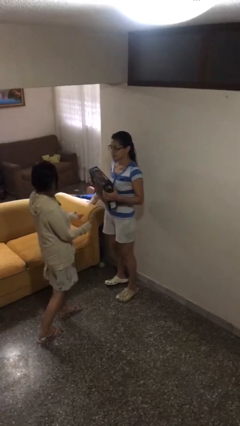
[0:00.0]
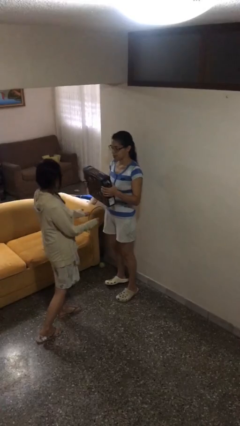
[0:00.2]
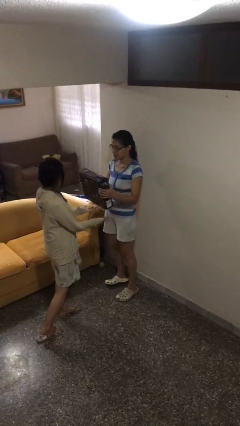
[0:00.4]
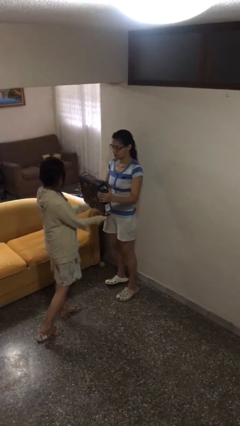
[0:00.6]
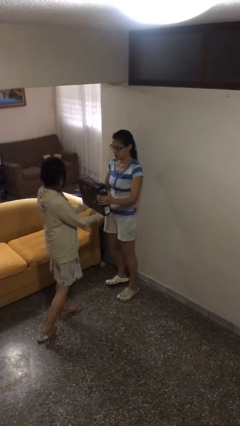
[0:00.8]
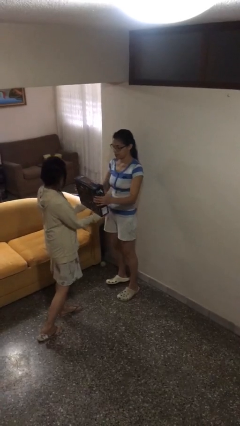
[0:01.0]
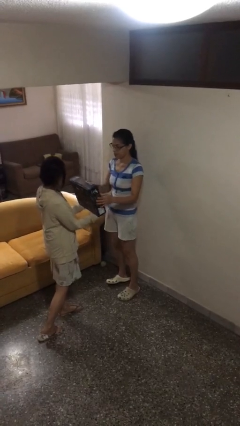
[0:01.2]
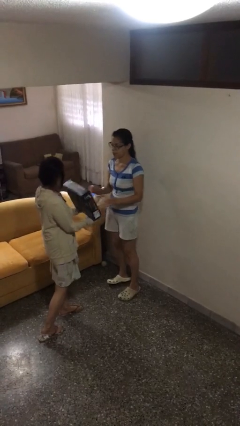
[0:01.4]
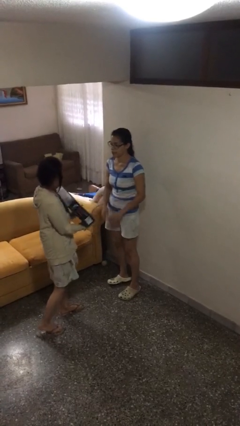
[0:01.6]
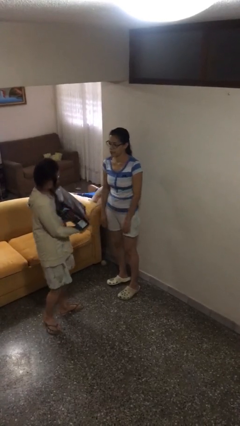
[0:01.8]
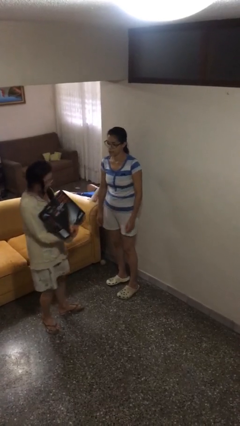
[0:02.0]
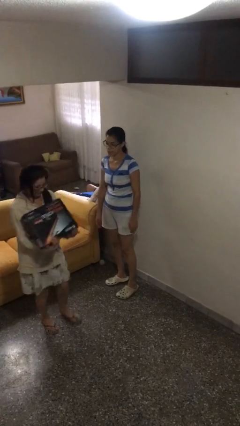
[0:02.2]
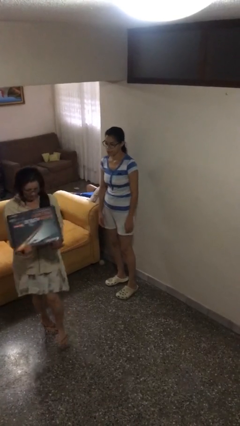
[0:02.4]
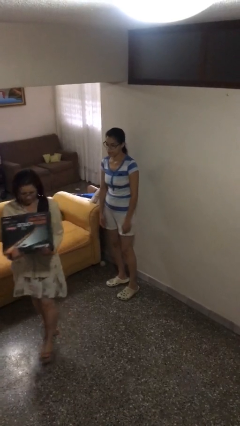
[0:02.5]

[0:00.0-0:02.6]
person transfers object to person

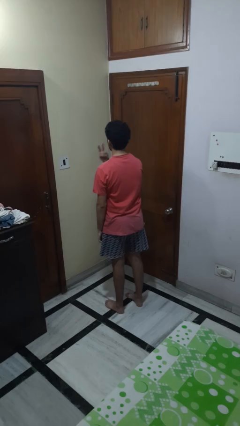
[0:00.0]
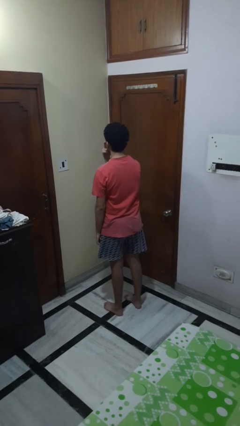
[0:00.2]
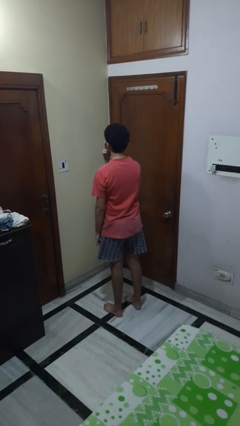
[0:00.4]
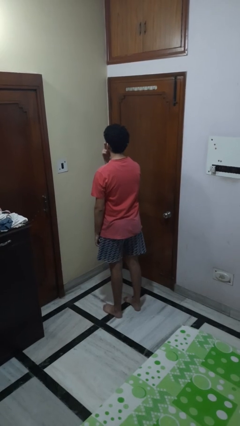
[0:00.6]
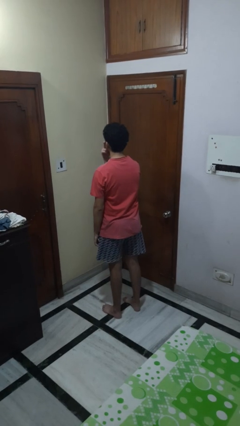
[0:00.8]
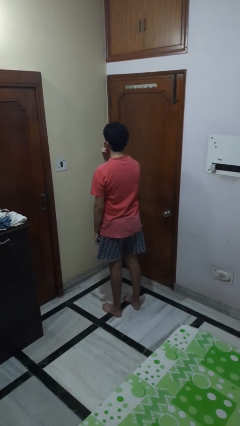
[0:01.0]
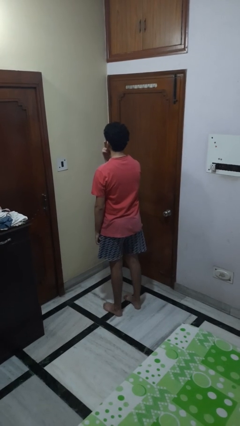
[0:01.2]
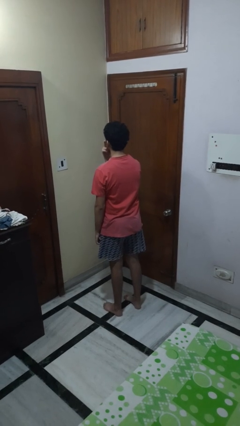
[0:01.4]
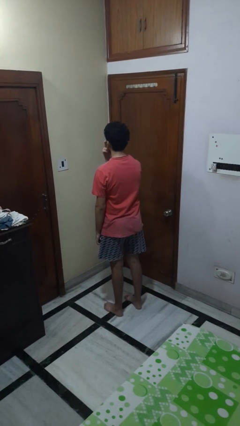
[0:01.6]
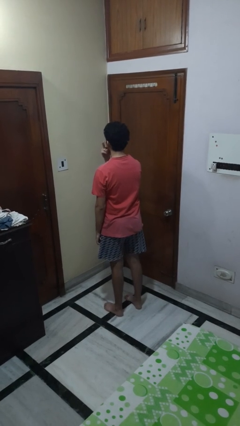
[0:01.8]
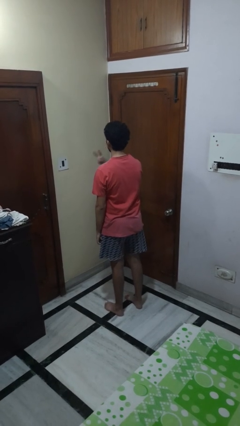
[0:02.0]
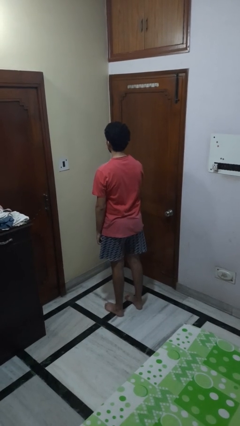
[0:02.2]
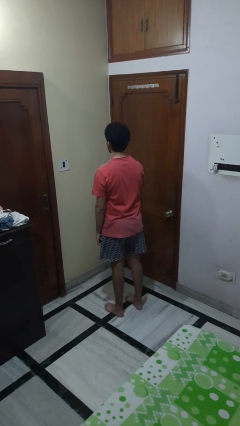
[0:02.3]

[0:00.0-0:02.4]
person gestures watch closely

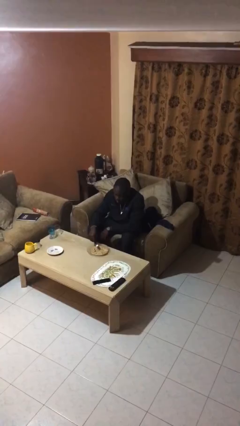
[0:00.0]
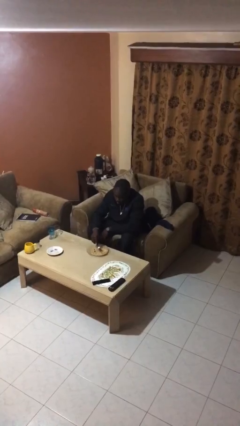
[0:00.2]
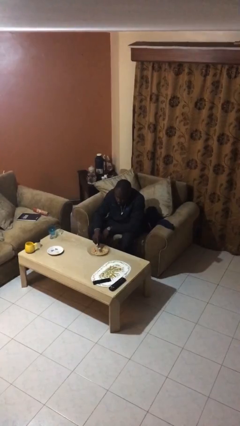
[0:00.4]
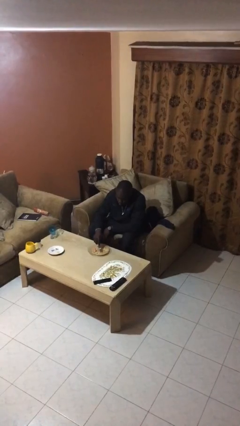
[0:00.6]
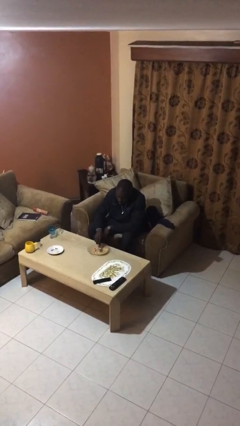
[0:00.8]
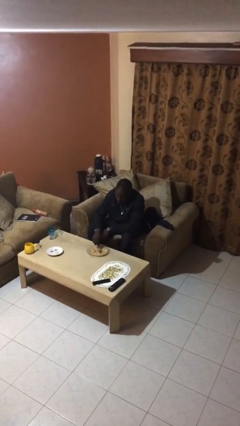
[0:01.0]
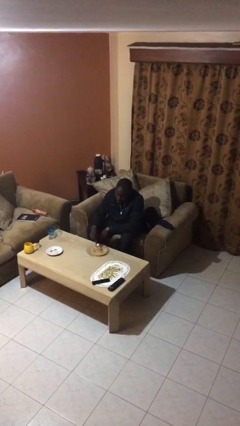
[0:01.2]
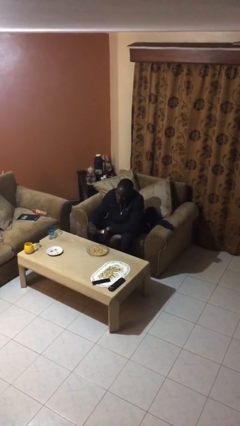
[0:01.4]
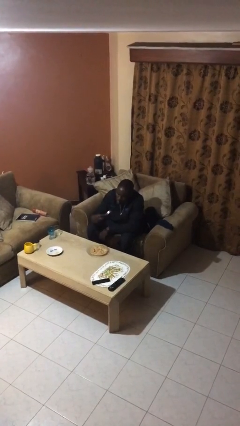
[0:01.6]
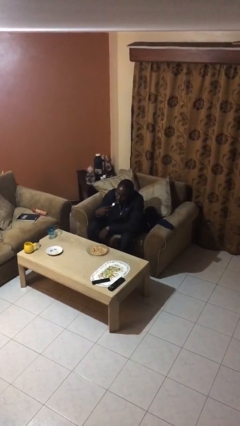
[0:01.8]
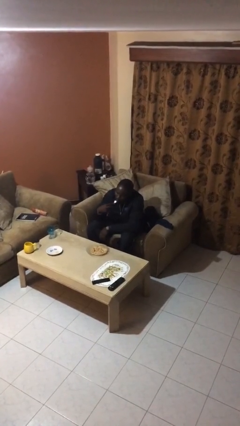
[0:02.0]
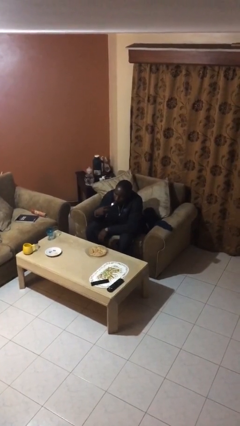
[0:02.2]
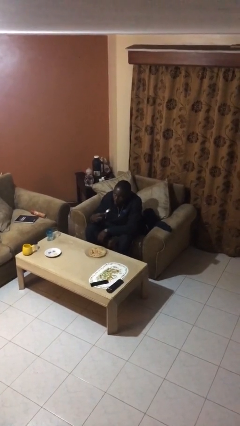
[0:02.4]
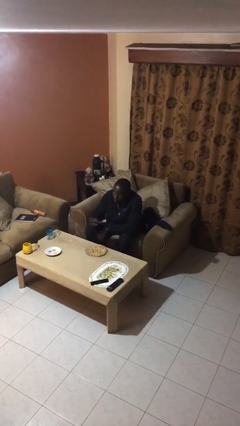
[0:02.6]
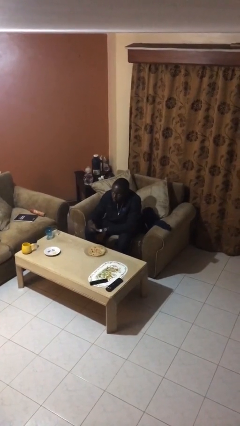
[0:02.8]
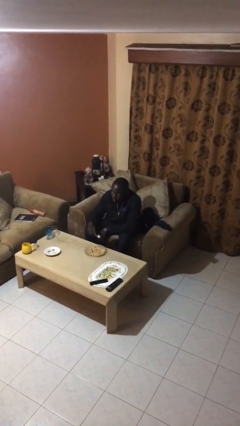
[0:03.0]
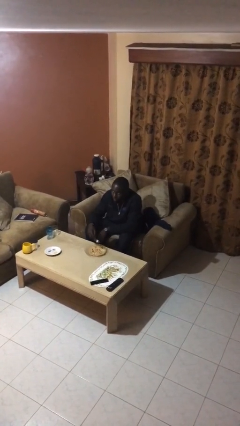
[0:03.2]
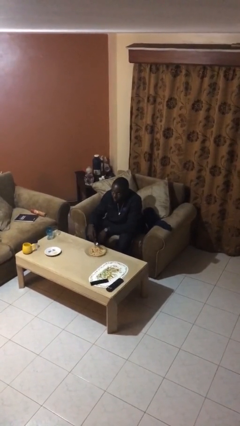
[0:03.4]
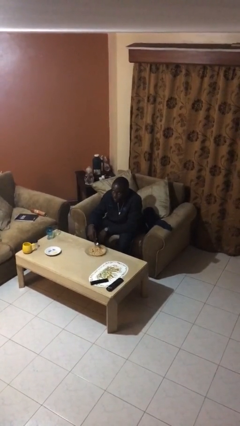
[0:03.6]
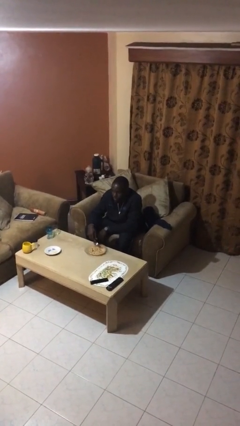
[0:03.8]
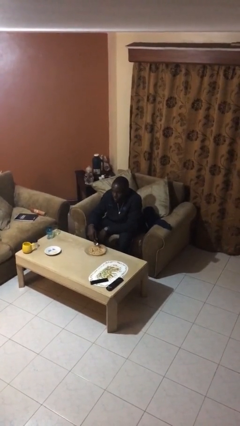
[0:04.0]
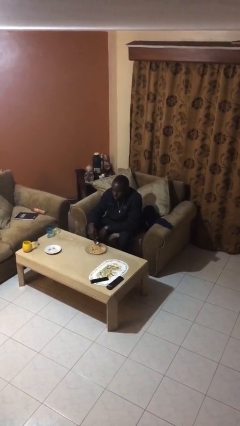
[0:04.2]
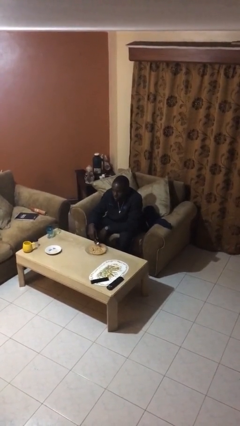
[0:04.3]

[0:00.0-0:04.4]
person eats with utensil

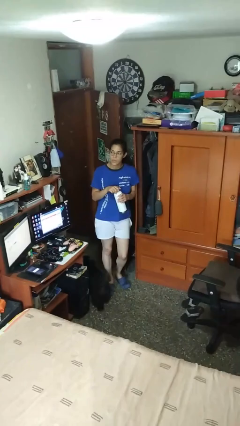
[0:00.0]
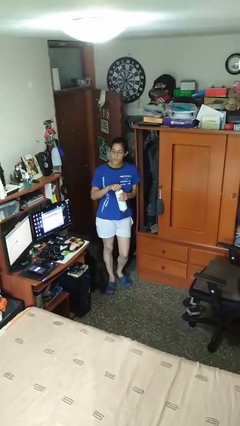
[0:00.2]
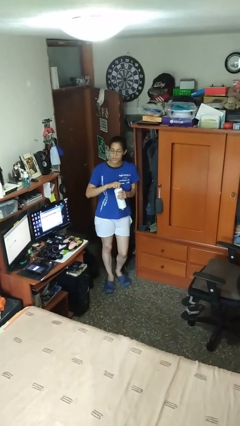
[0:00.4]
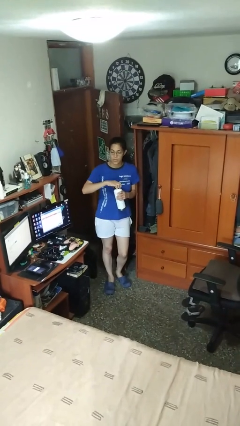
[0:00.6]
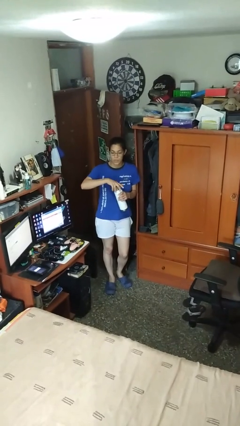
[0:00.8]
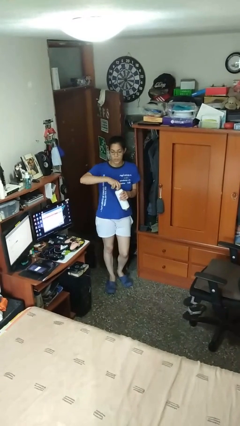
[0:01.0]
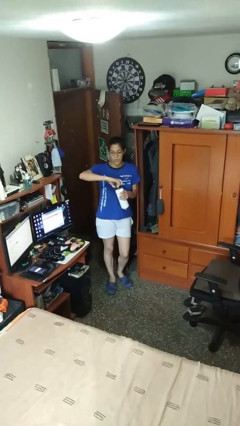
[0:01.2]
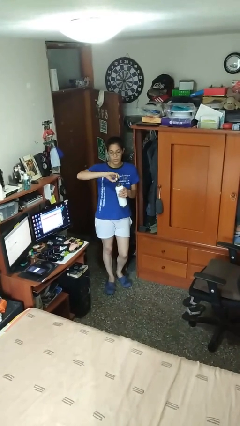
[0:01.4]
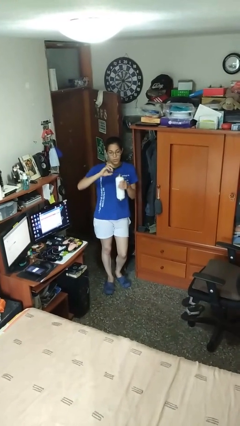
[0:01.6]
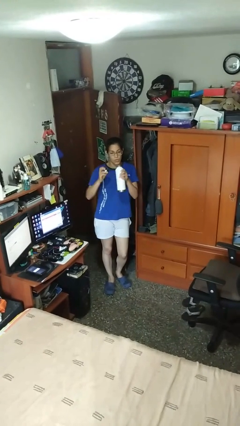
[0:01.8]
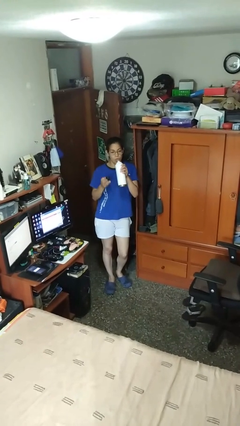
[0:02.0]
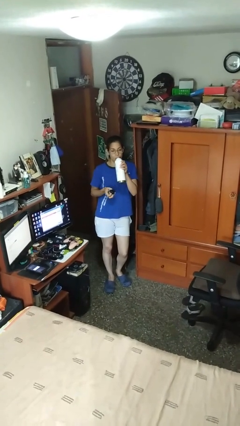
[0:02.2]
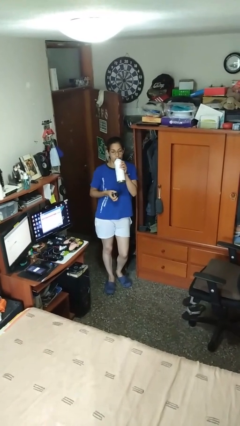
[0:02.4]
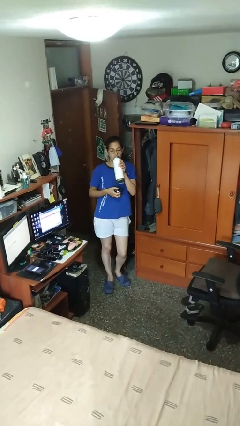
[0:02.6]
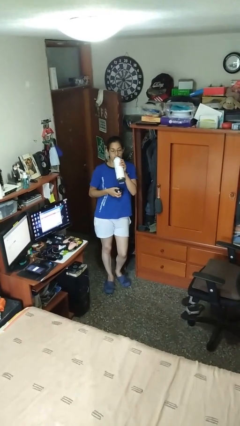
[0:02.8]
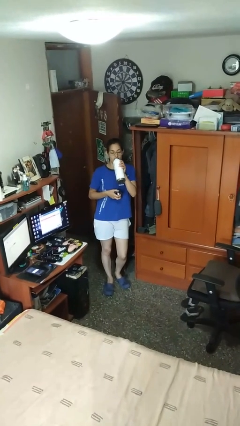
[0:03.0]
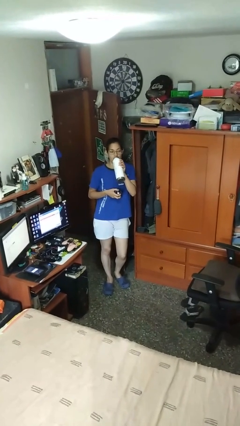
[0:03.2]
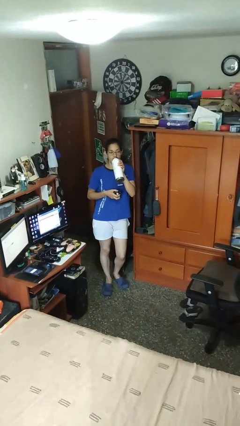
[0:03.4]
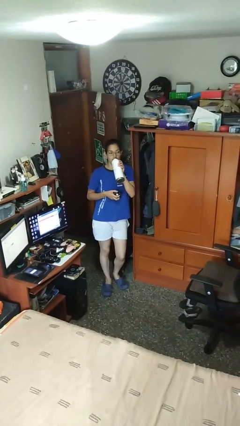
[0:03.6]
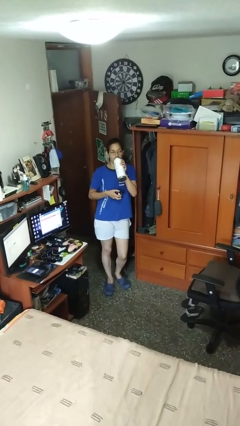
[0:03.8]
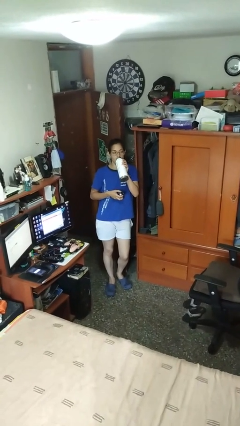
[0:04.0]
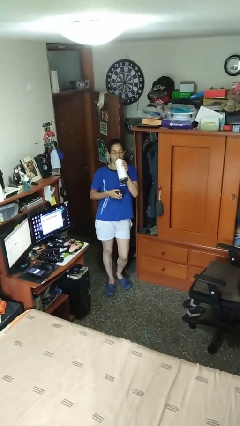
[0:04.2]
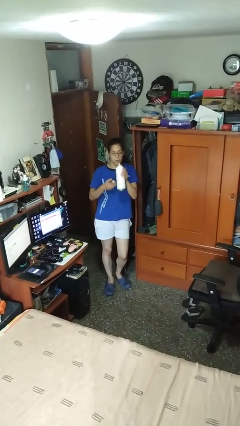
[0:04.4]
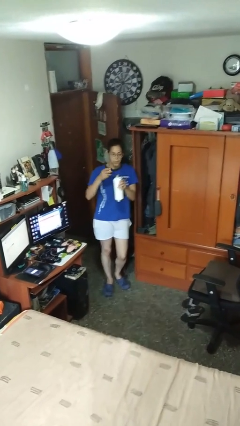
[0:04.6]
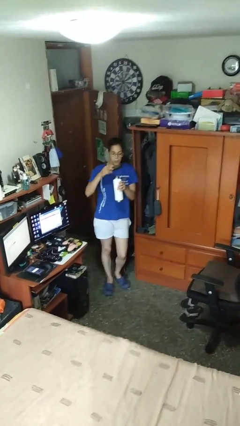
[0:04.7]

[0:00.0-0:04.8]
person drinks from bottle

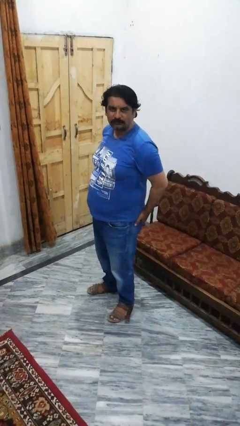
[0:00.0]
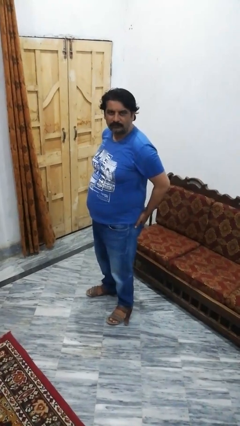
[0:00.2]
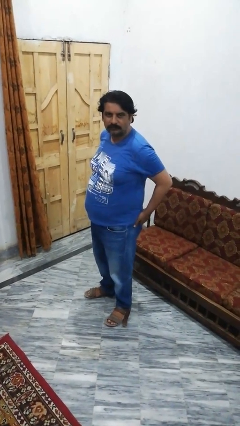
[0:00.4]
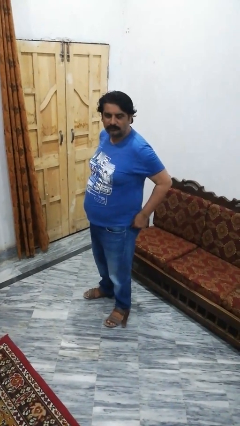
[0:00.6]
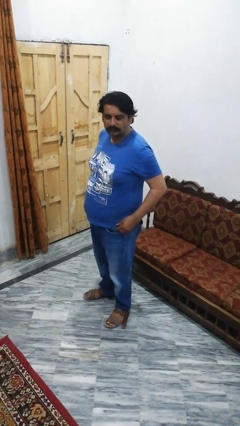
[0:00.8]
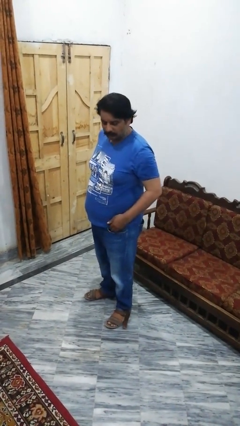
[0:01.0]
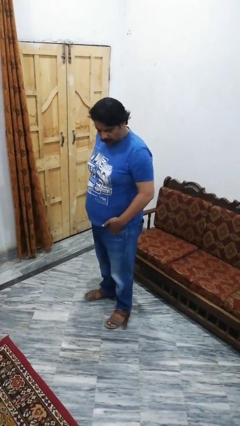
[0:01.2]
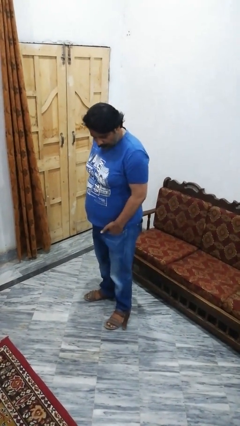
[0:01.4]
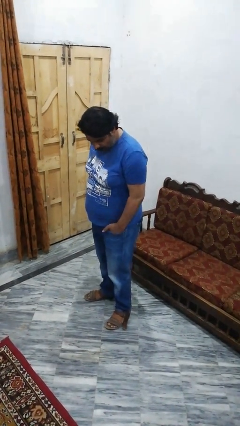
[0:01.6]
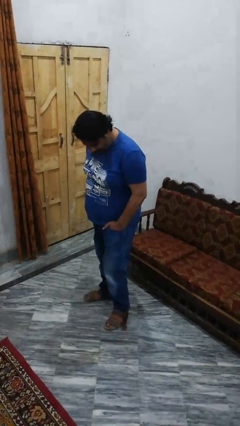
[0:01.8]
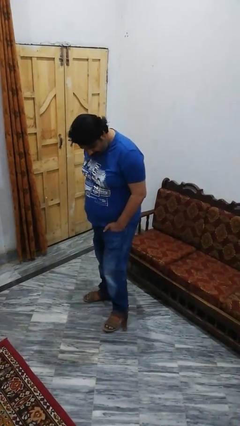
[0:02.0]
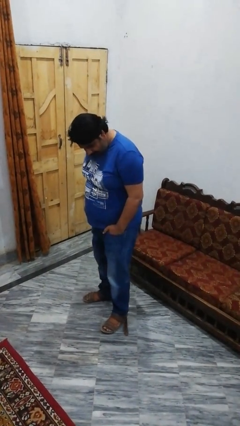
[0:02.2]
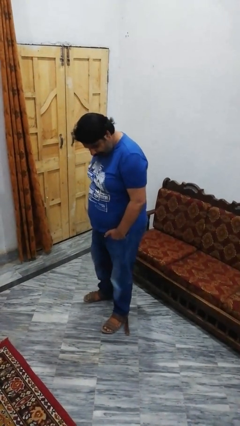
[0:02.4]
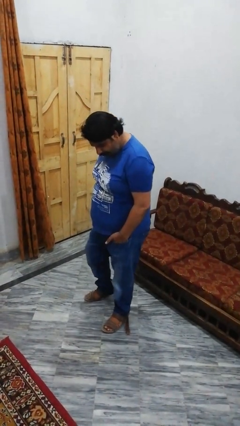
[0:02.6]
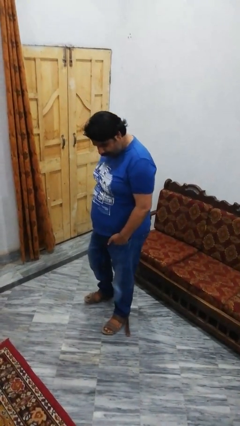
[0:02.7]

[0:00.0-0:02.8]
person puts hands in back pockets

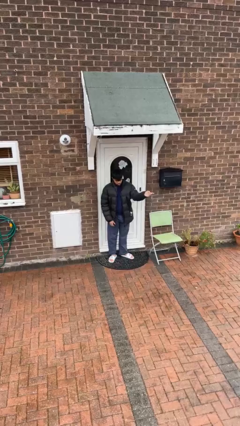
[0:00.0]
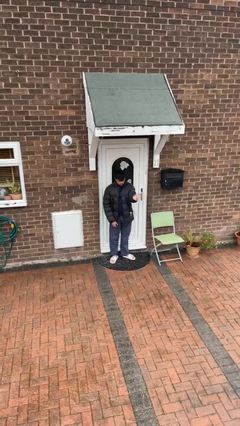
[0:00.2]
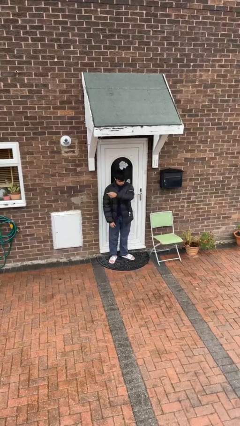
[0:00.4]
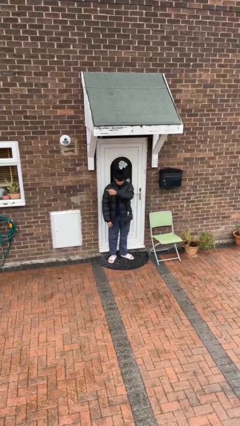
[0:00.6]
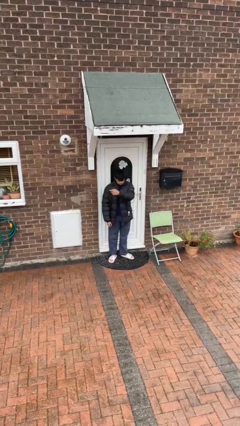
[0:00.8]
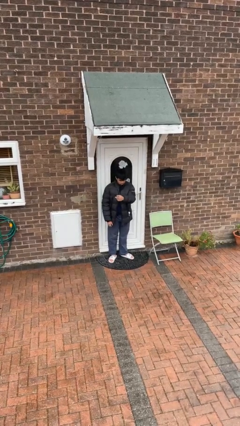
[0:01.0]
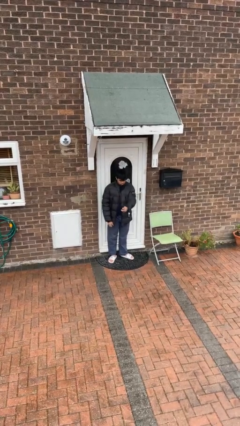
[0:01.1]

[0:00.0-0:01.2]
person gestures swipe right
